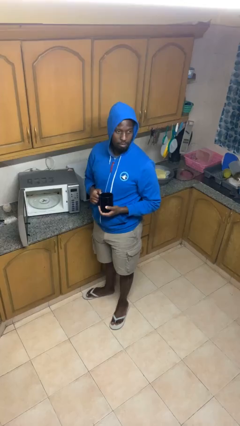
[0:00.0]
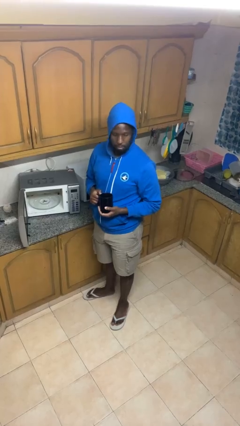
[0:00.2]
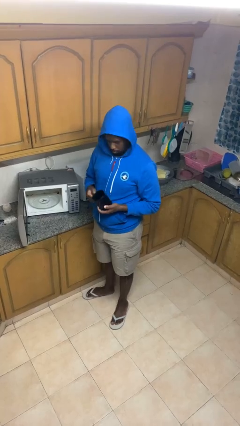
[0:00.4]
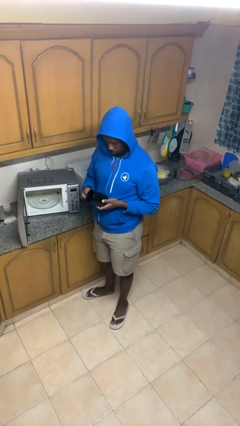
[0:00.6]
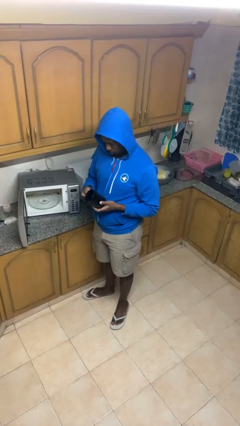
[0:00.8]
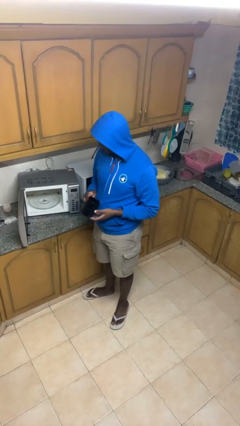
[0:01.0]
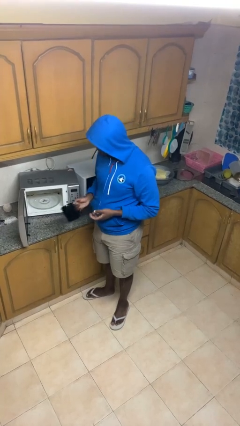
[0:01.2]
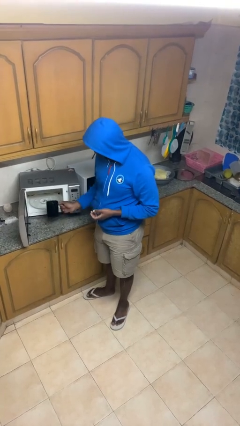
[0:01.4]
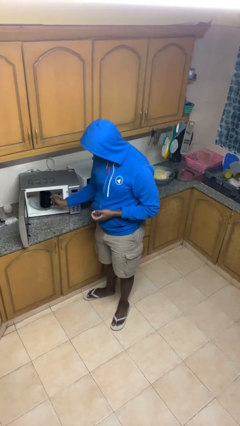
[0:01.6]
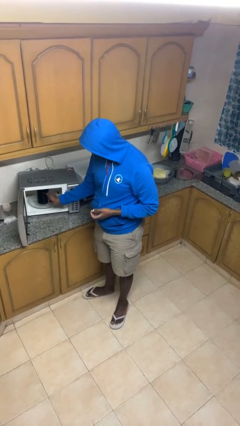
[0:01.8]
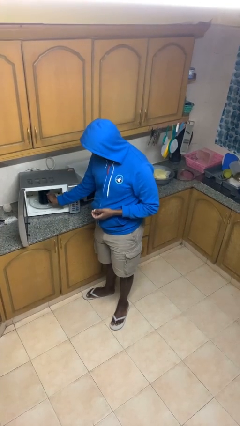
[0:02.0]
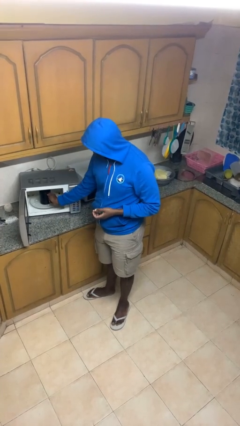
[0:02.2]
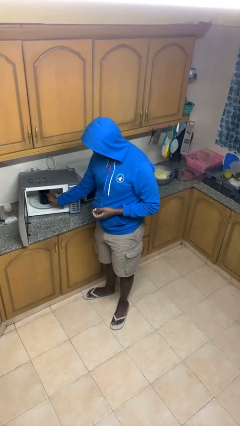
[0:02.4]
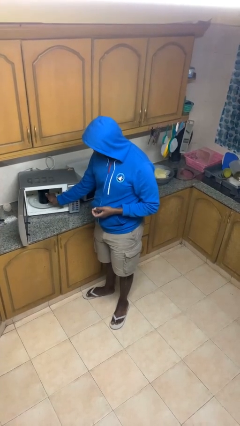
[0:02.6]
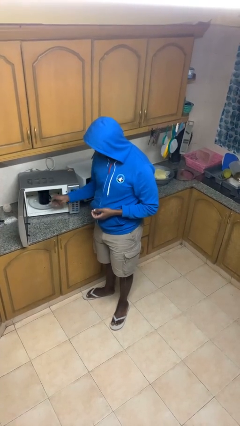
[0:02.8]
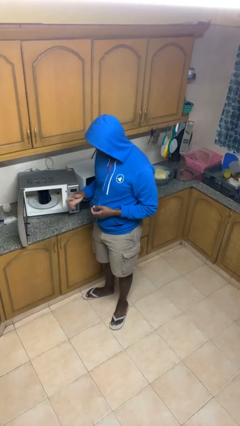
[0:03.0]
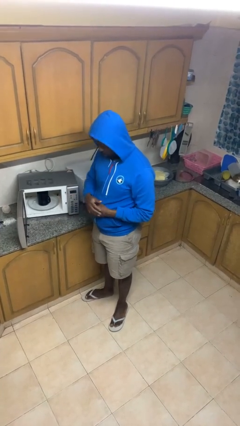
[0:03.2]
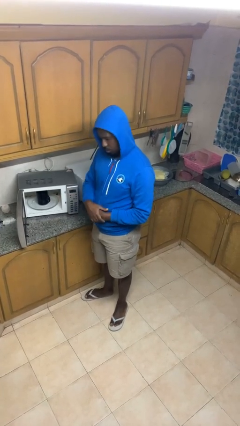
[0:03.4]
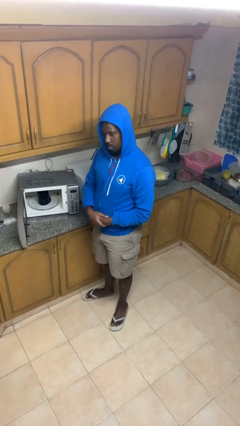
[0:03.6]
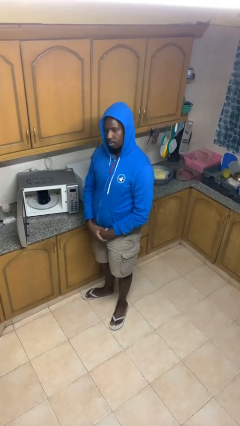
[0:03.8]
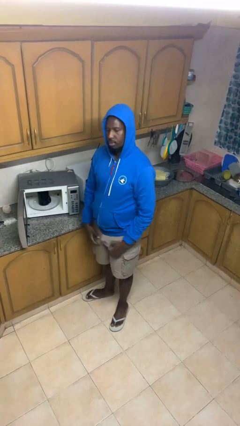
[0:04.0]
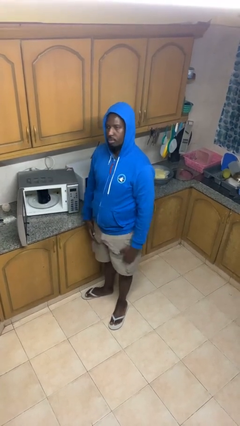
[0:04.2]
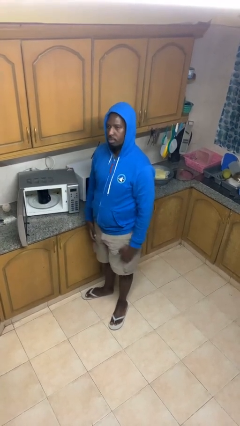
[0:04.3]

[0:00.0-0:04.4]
person puts object into microwave

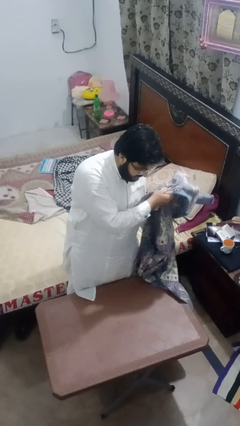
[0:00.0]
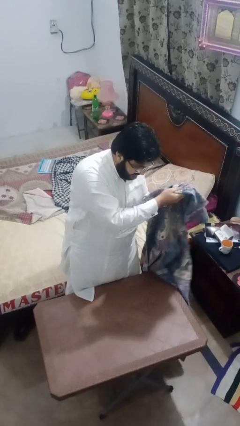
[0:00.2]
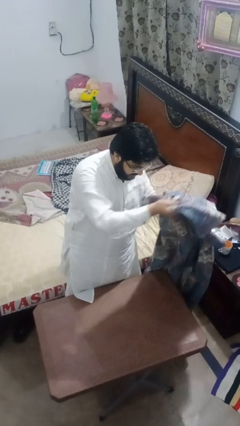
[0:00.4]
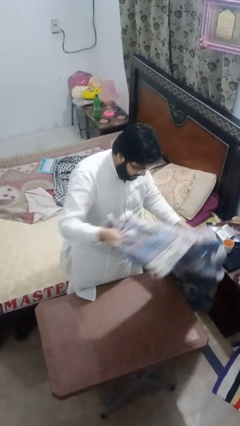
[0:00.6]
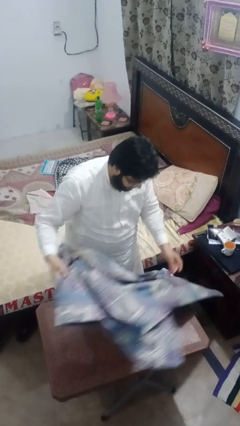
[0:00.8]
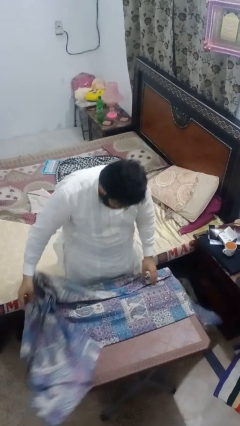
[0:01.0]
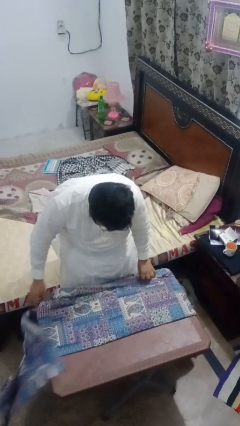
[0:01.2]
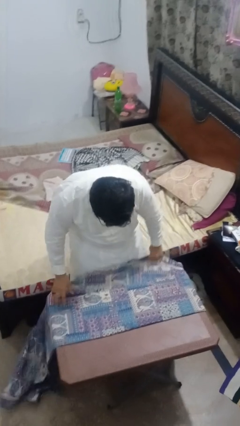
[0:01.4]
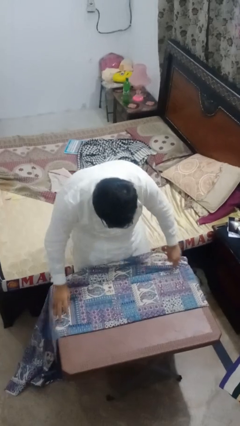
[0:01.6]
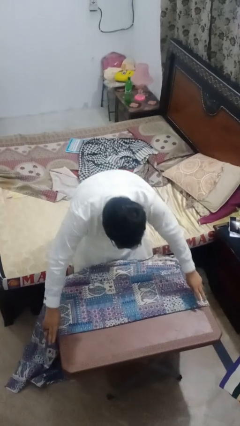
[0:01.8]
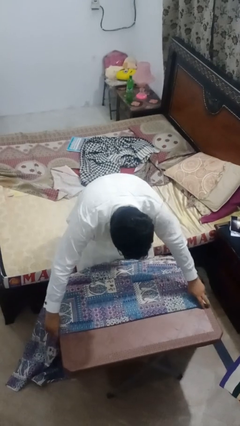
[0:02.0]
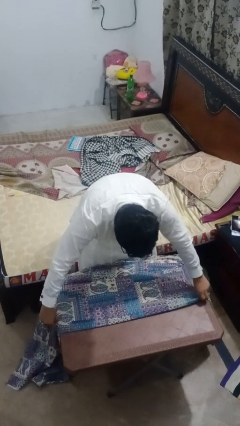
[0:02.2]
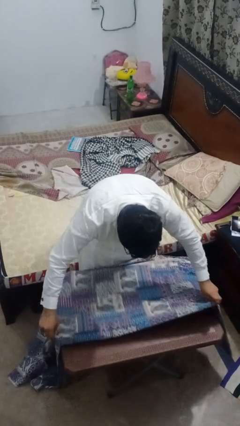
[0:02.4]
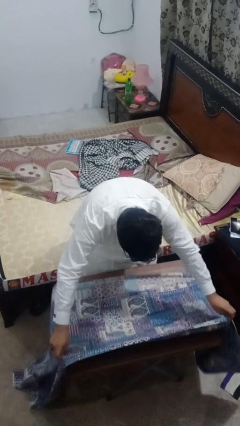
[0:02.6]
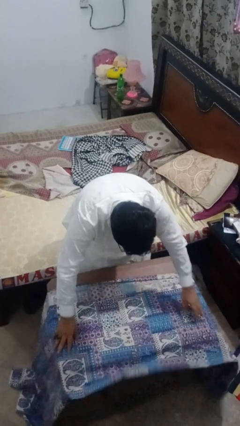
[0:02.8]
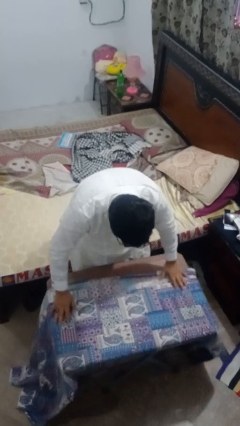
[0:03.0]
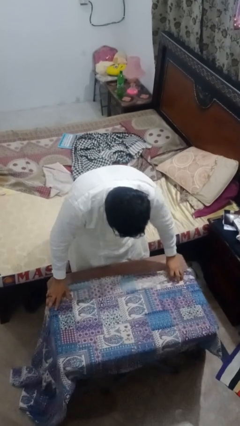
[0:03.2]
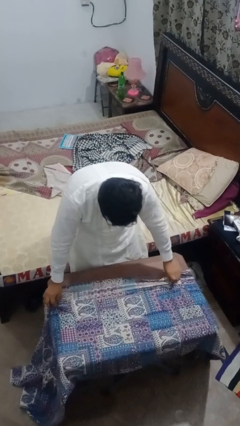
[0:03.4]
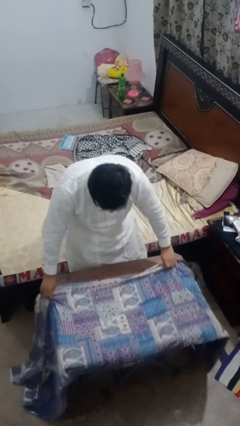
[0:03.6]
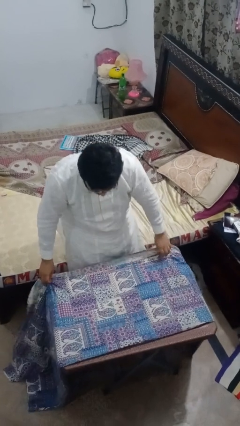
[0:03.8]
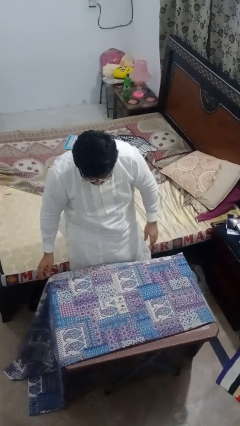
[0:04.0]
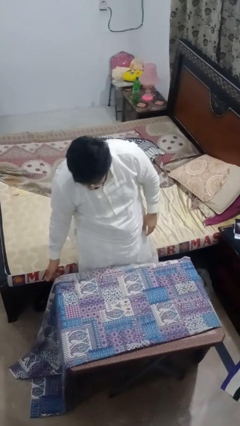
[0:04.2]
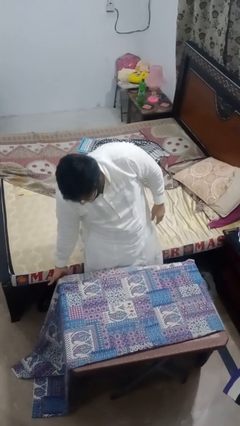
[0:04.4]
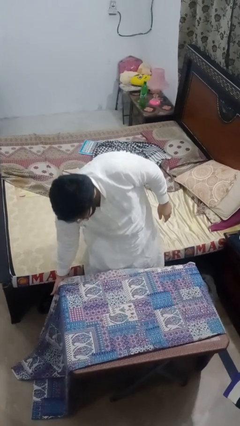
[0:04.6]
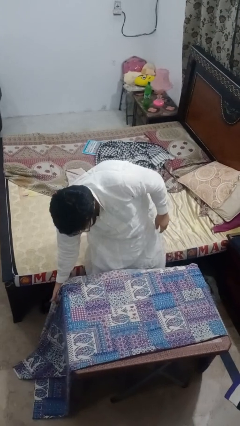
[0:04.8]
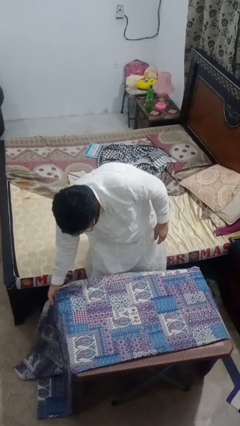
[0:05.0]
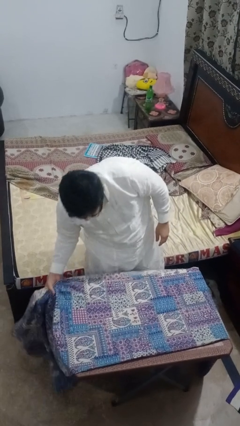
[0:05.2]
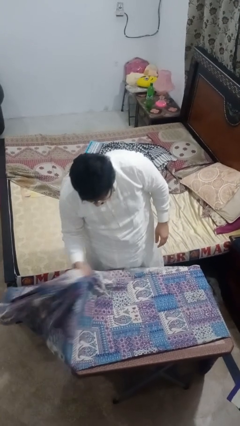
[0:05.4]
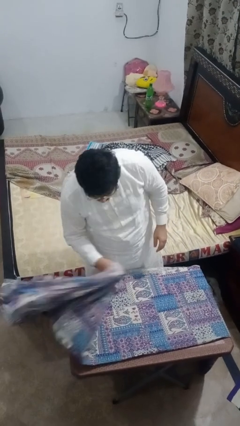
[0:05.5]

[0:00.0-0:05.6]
person spreads tablecloth

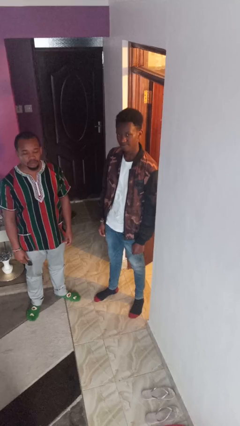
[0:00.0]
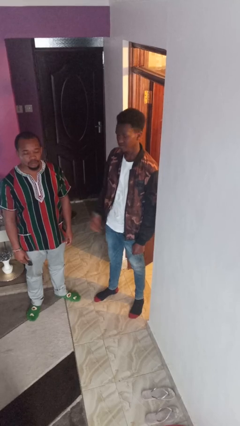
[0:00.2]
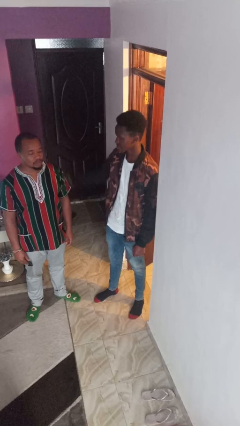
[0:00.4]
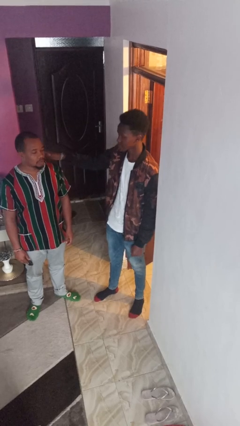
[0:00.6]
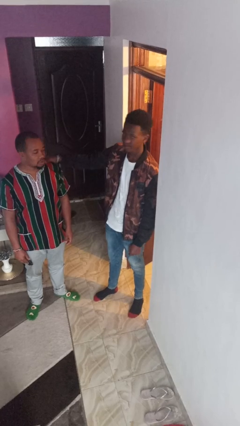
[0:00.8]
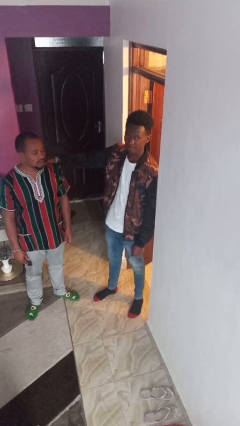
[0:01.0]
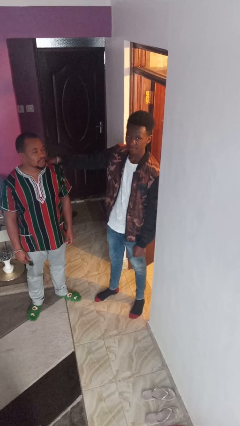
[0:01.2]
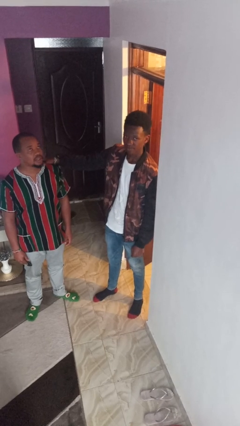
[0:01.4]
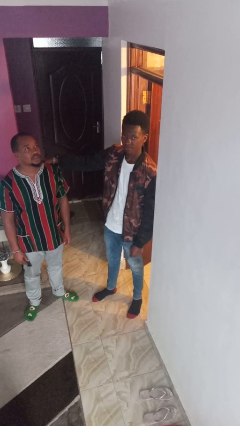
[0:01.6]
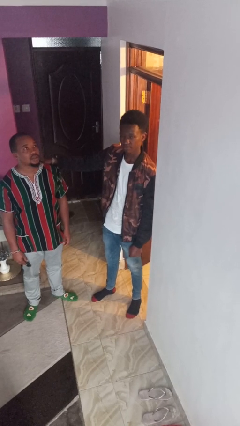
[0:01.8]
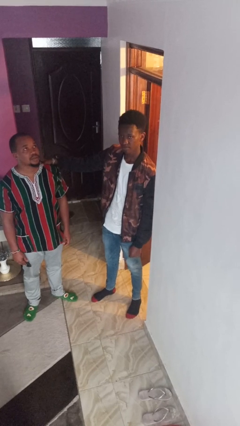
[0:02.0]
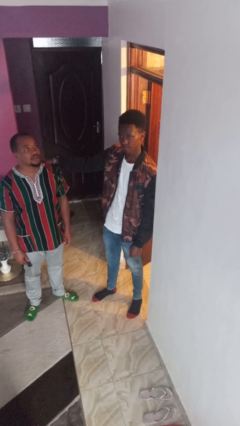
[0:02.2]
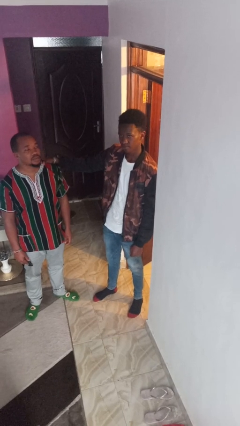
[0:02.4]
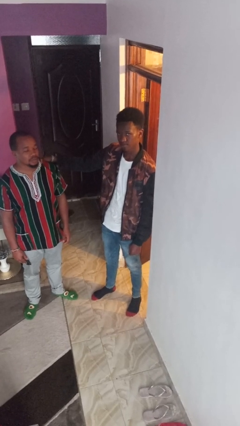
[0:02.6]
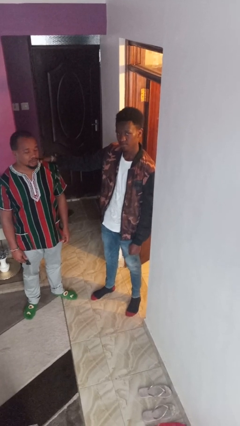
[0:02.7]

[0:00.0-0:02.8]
person pounds shoulders of person

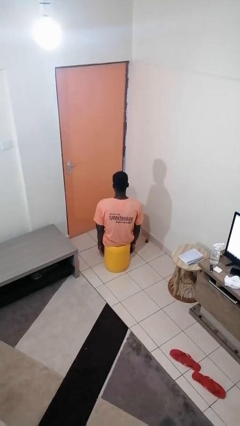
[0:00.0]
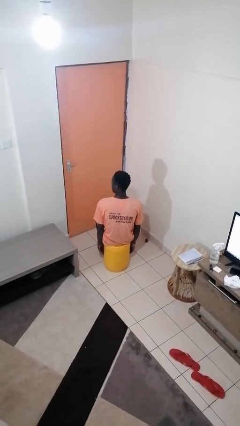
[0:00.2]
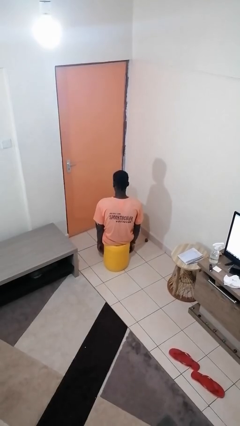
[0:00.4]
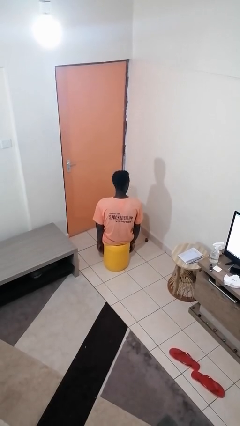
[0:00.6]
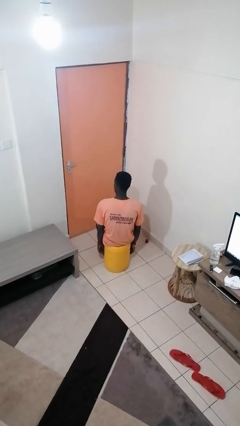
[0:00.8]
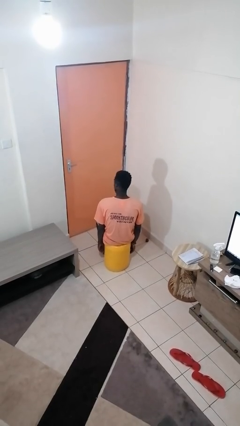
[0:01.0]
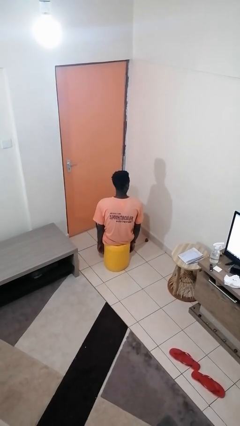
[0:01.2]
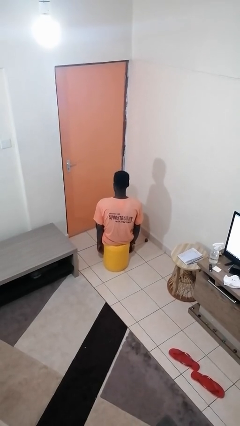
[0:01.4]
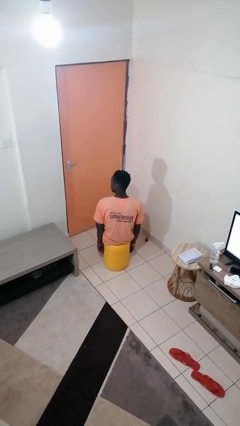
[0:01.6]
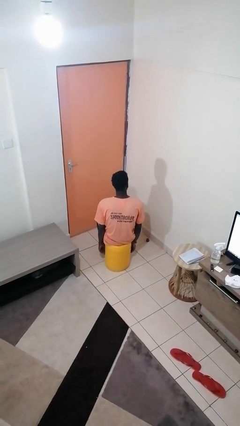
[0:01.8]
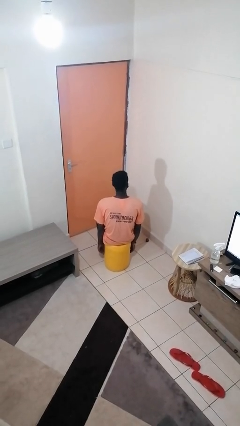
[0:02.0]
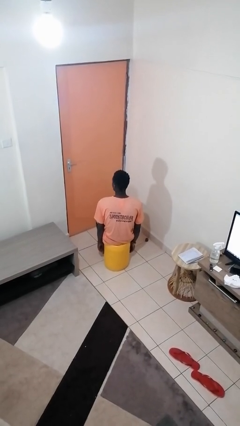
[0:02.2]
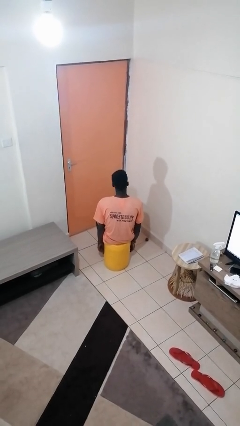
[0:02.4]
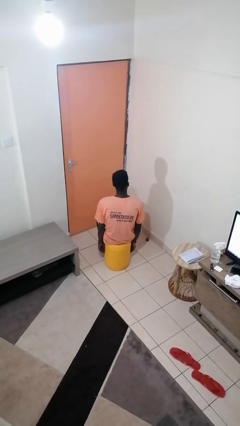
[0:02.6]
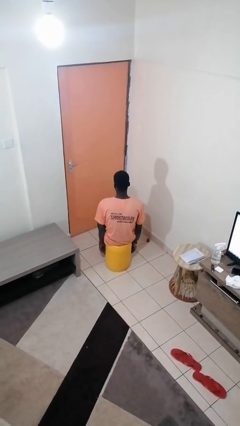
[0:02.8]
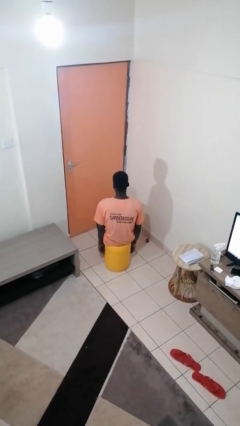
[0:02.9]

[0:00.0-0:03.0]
person shakes head

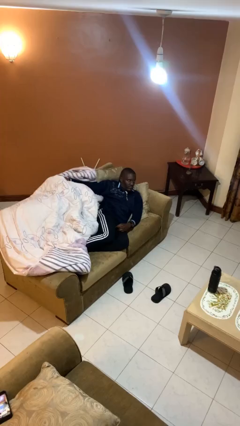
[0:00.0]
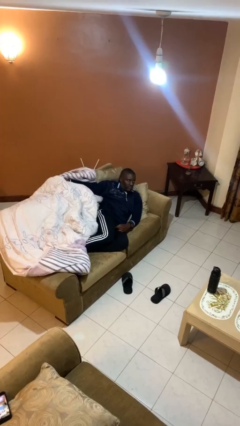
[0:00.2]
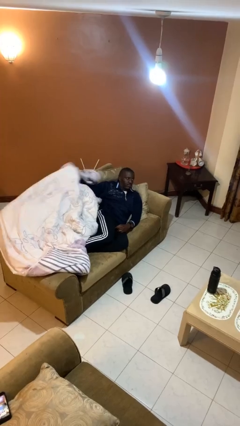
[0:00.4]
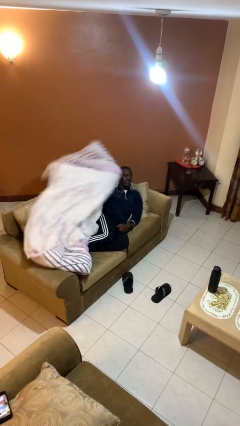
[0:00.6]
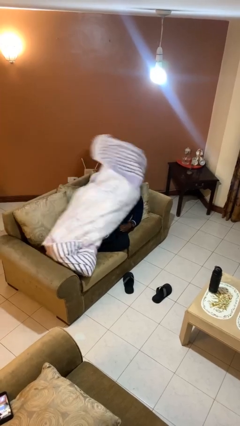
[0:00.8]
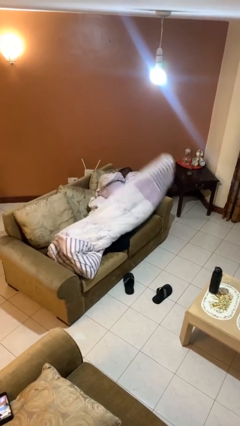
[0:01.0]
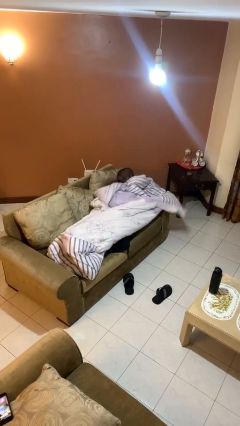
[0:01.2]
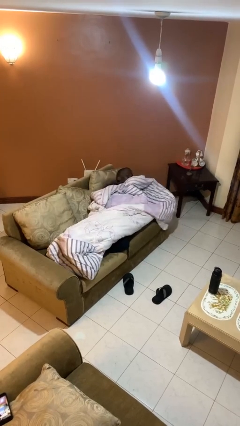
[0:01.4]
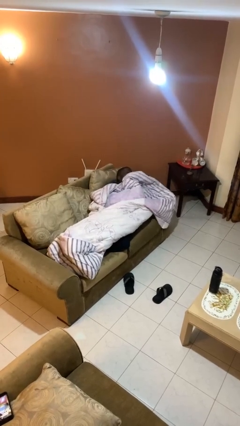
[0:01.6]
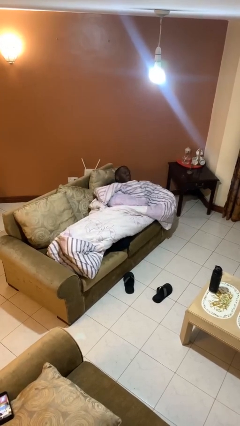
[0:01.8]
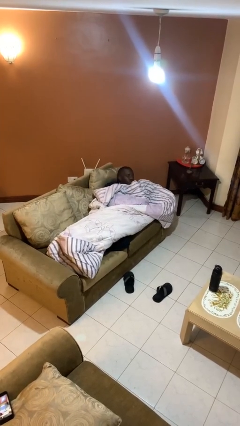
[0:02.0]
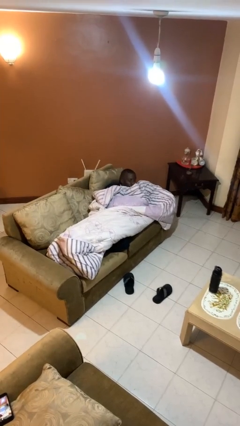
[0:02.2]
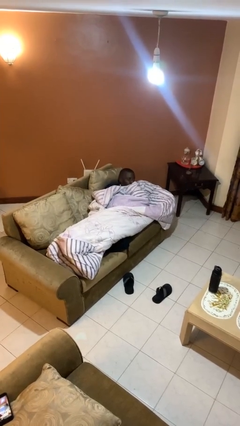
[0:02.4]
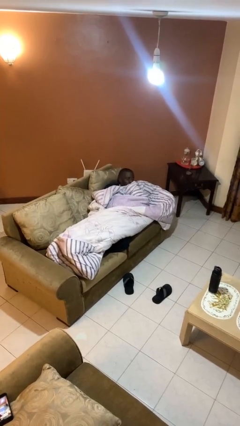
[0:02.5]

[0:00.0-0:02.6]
person covers with blanket
